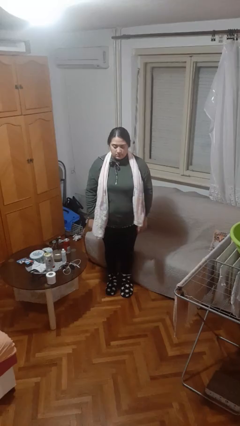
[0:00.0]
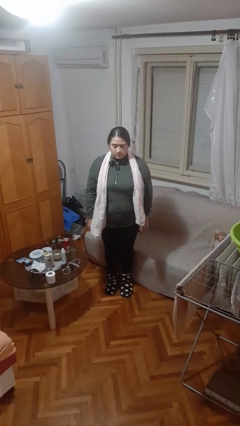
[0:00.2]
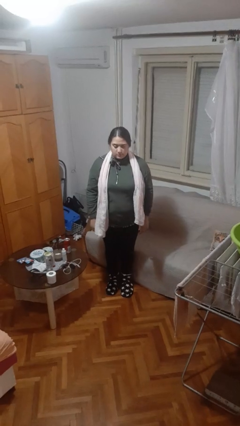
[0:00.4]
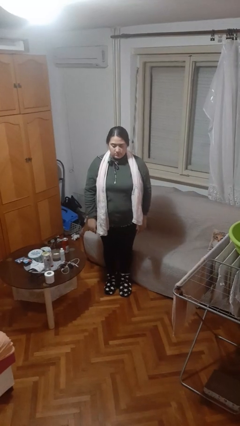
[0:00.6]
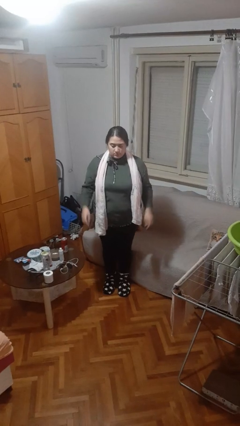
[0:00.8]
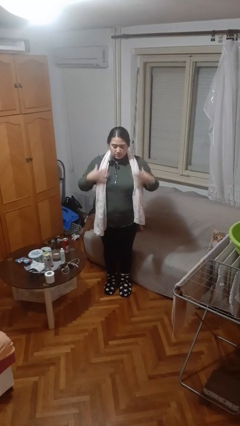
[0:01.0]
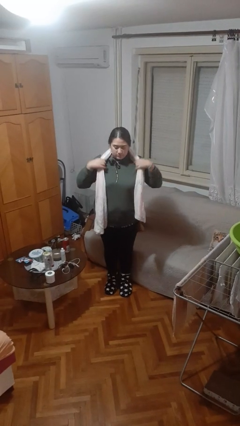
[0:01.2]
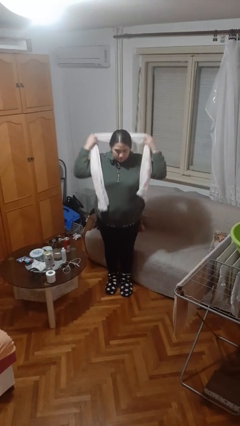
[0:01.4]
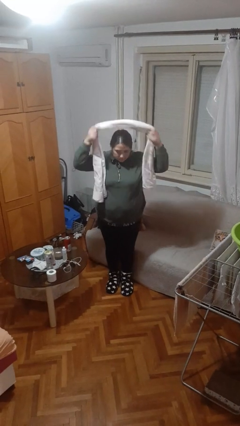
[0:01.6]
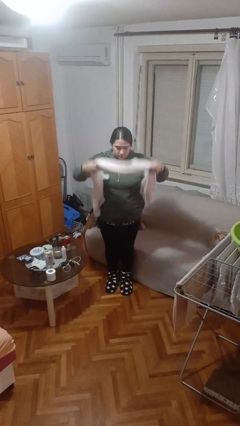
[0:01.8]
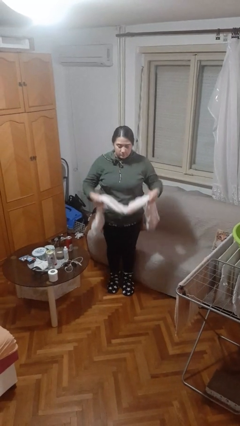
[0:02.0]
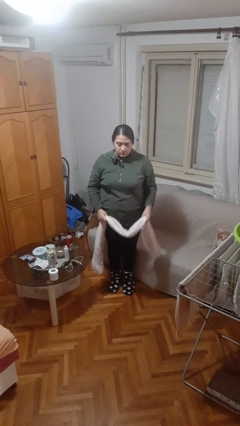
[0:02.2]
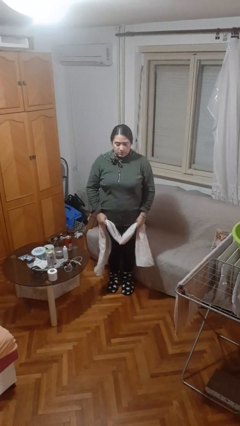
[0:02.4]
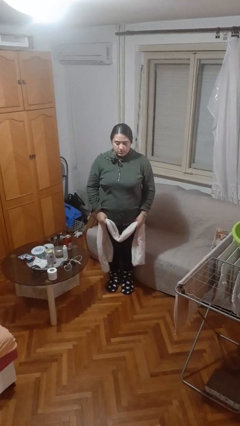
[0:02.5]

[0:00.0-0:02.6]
person takes off scarf

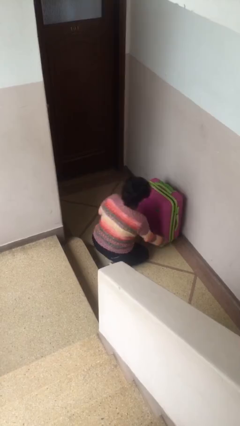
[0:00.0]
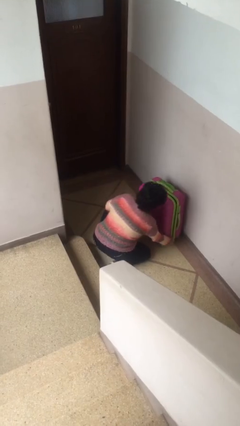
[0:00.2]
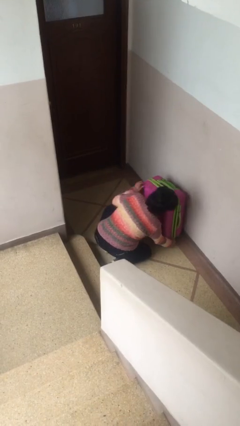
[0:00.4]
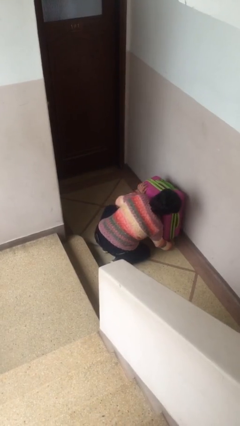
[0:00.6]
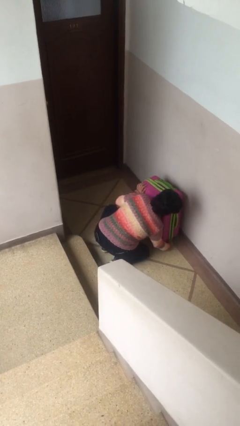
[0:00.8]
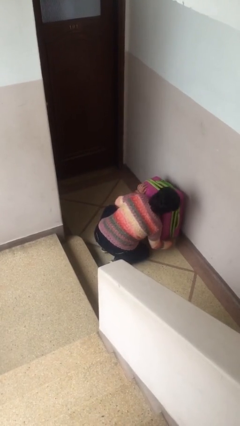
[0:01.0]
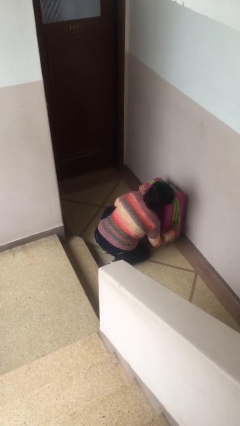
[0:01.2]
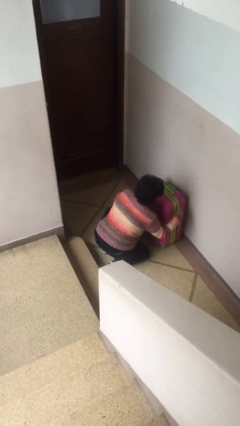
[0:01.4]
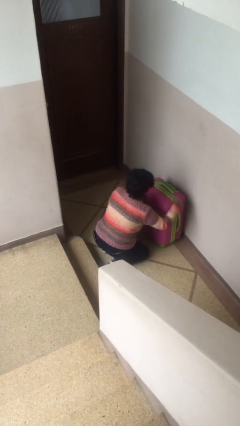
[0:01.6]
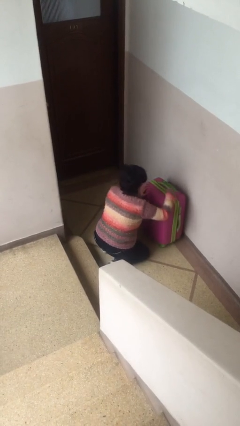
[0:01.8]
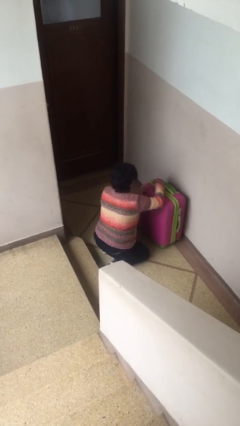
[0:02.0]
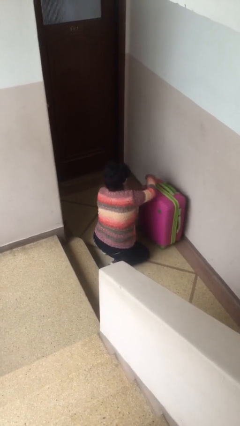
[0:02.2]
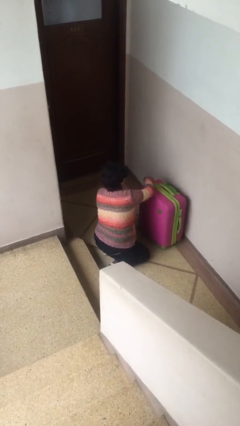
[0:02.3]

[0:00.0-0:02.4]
person closes suitcase

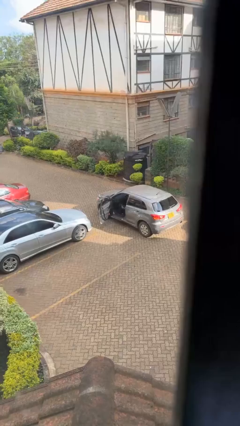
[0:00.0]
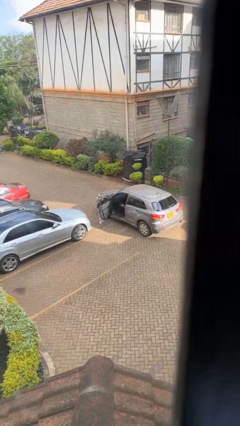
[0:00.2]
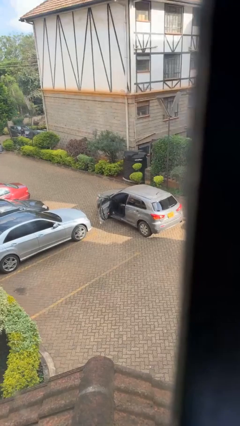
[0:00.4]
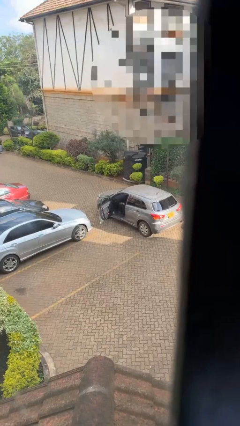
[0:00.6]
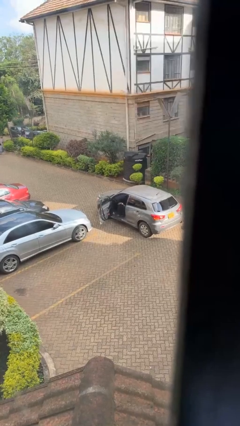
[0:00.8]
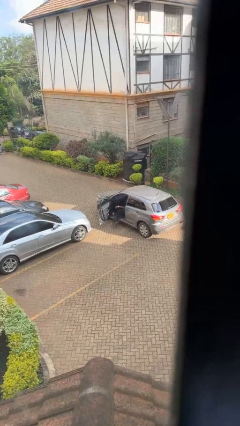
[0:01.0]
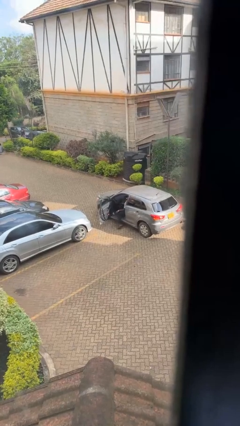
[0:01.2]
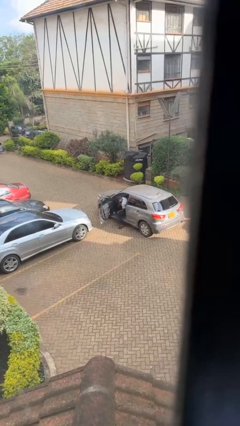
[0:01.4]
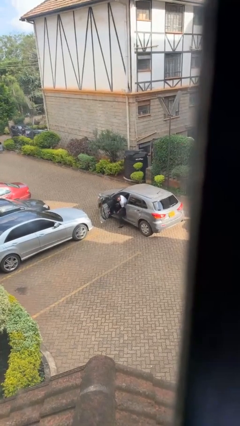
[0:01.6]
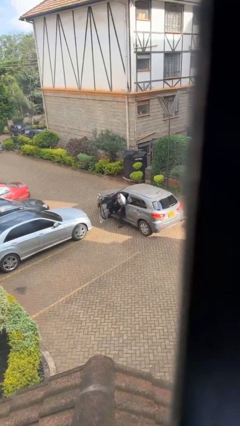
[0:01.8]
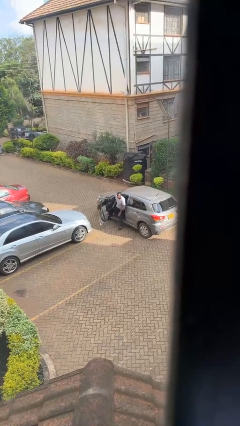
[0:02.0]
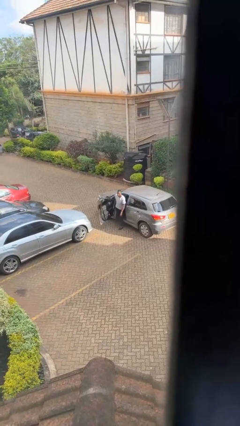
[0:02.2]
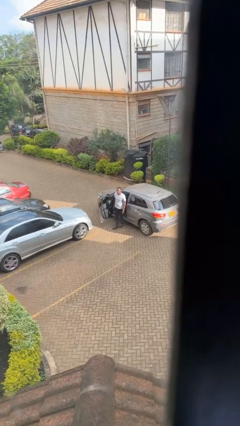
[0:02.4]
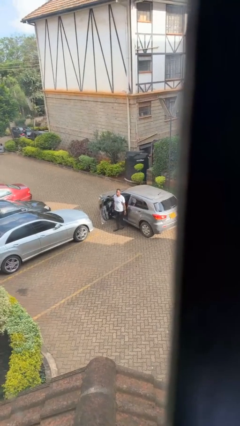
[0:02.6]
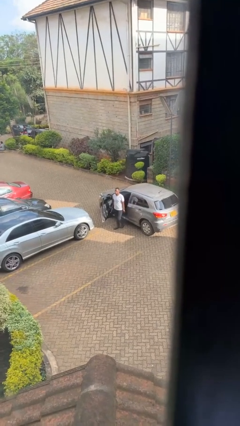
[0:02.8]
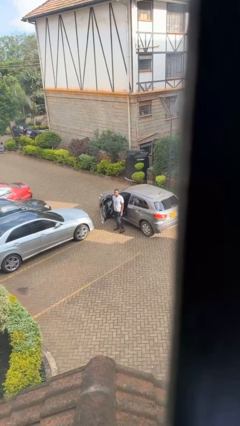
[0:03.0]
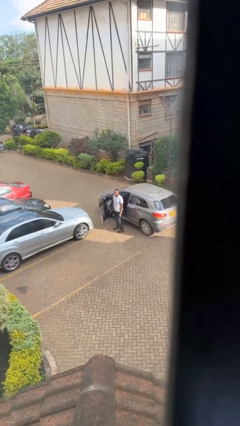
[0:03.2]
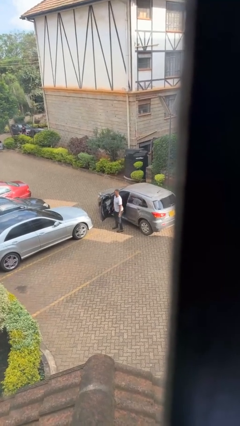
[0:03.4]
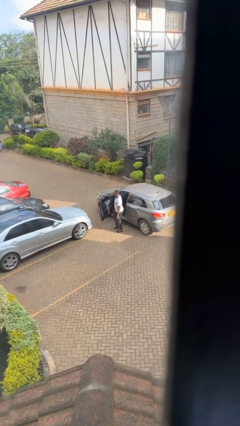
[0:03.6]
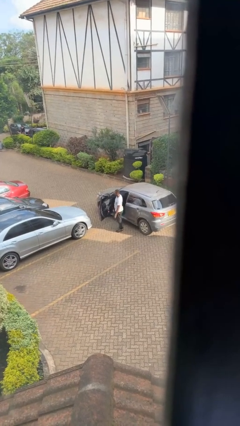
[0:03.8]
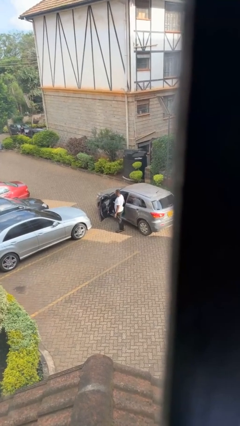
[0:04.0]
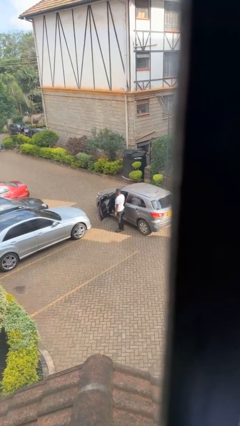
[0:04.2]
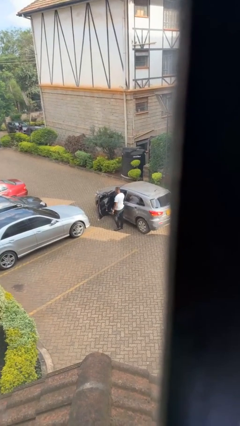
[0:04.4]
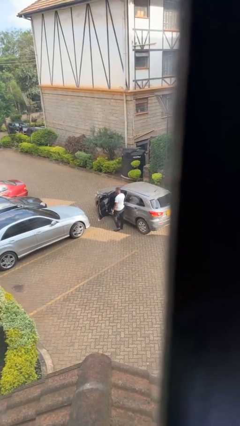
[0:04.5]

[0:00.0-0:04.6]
person exits car

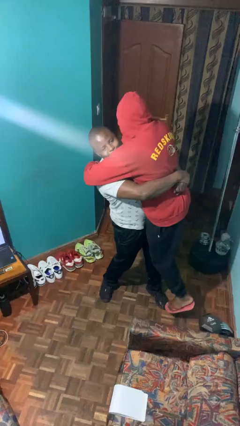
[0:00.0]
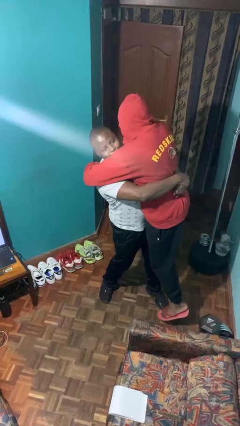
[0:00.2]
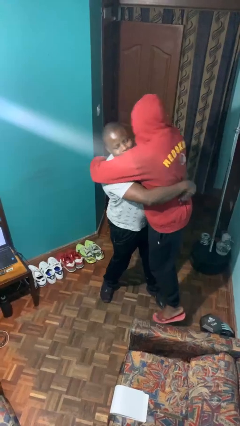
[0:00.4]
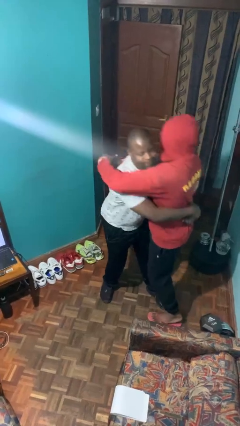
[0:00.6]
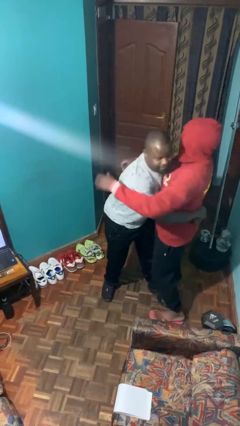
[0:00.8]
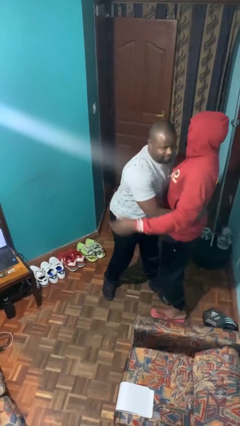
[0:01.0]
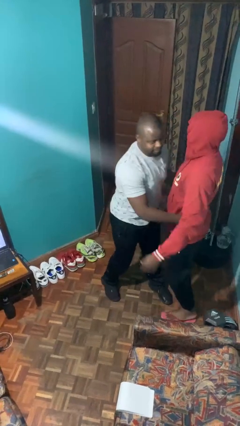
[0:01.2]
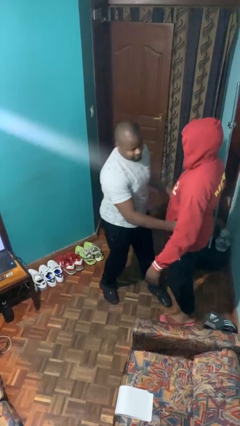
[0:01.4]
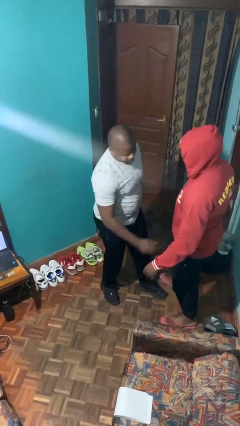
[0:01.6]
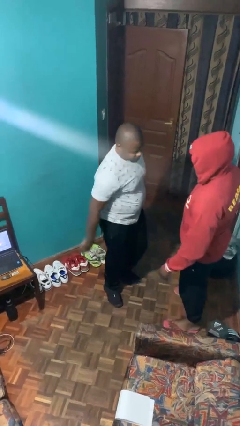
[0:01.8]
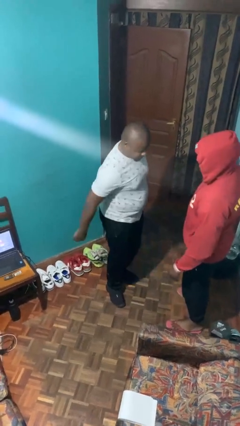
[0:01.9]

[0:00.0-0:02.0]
person puts down person

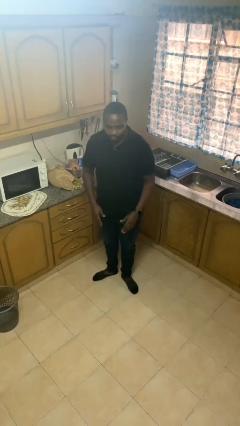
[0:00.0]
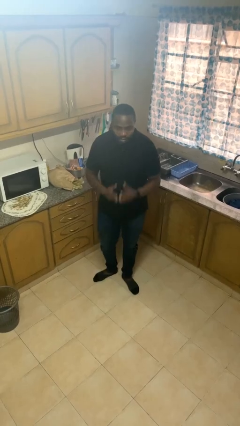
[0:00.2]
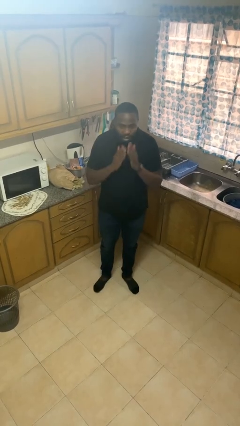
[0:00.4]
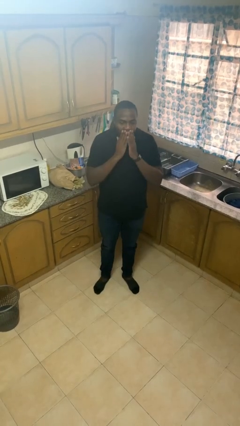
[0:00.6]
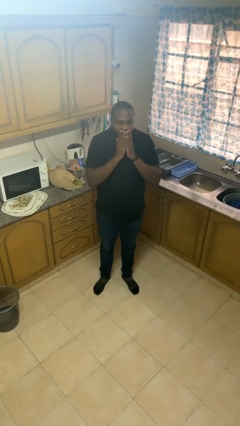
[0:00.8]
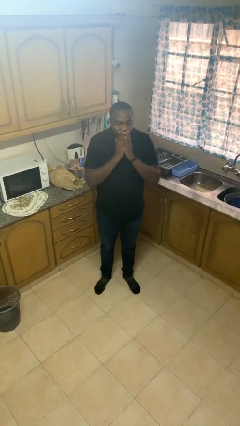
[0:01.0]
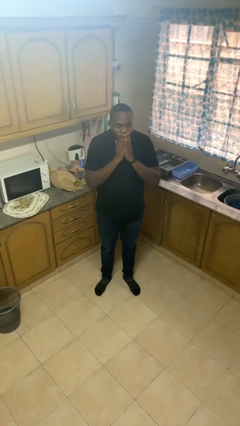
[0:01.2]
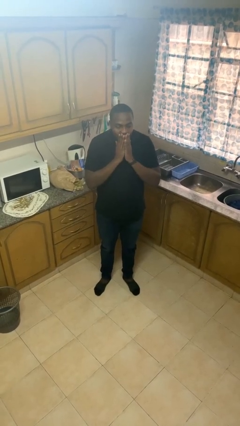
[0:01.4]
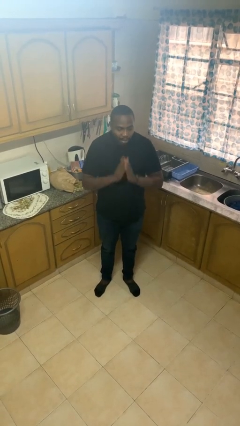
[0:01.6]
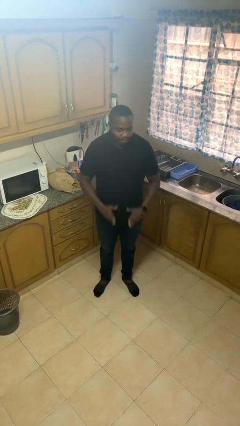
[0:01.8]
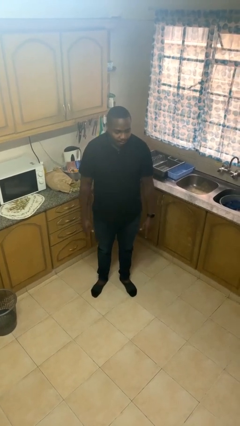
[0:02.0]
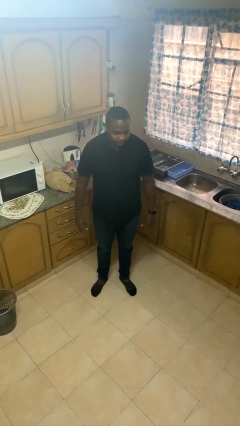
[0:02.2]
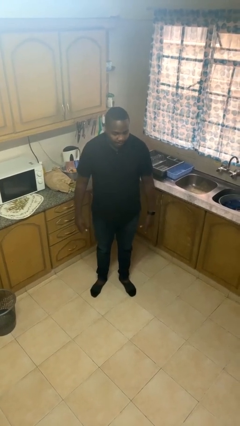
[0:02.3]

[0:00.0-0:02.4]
person yawns

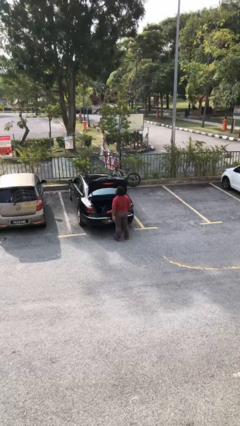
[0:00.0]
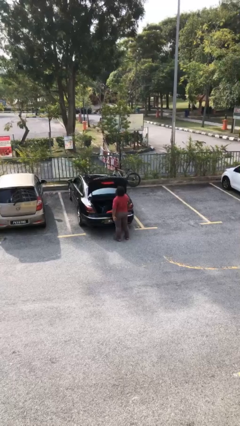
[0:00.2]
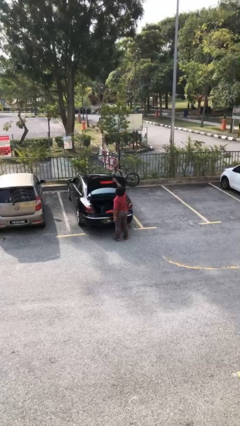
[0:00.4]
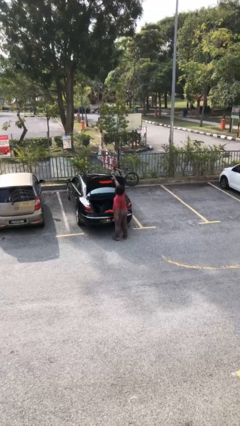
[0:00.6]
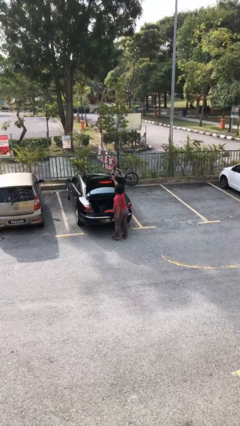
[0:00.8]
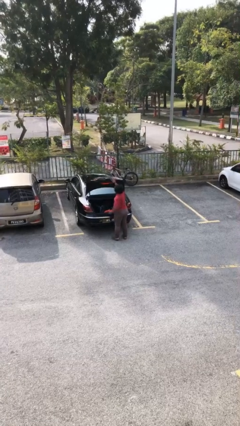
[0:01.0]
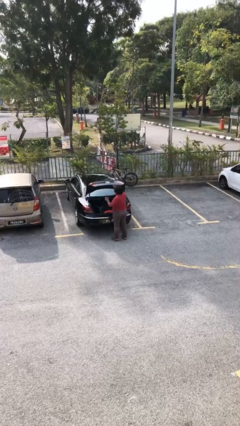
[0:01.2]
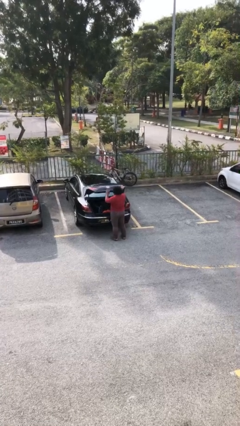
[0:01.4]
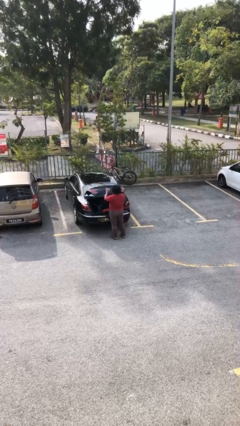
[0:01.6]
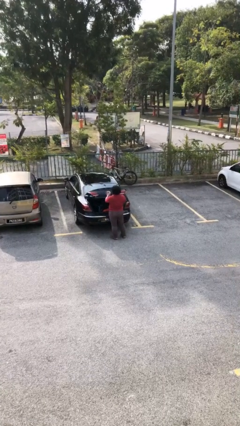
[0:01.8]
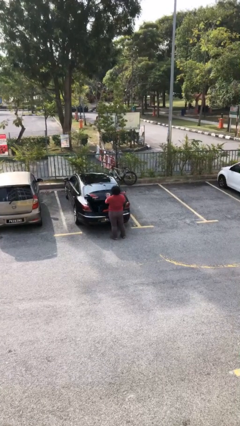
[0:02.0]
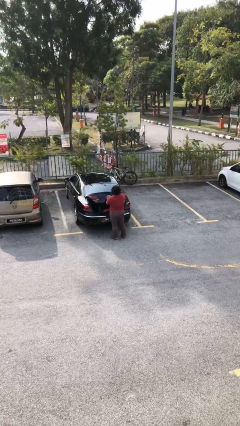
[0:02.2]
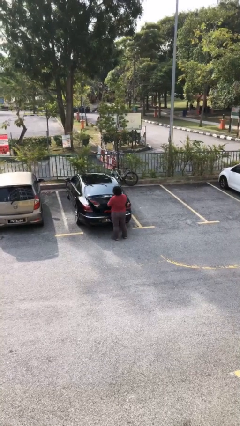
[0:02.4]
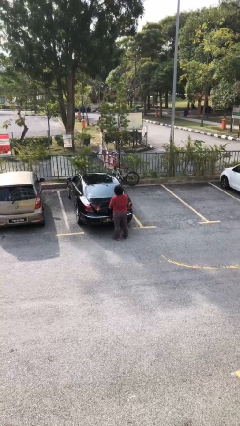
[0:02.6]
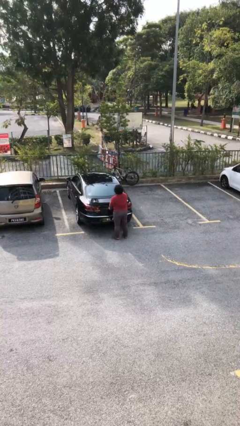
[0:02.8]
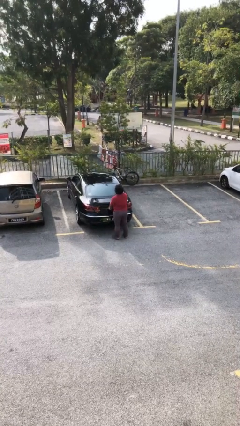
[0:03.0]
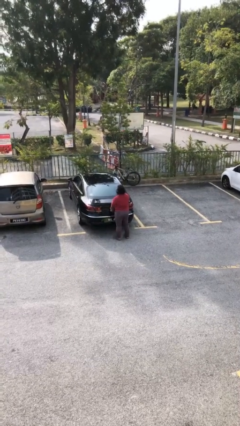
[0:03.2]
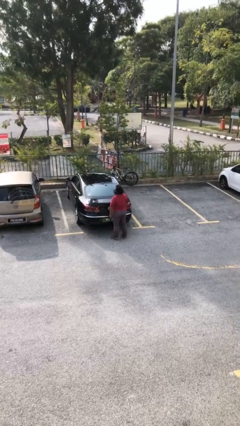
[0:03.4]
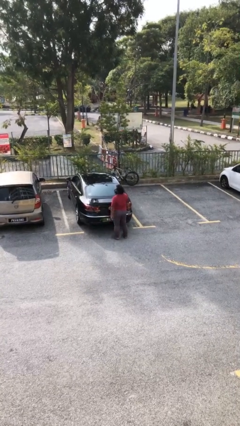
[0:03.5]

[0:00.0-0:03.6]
person closes car trunk
